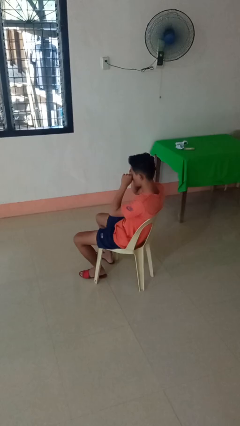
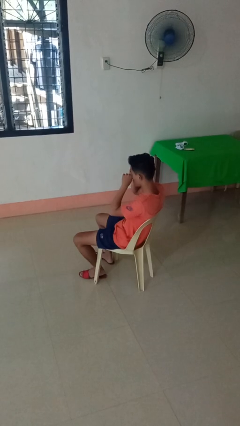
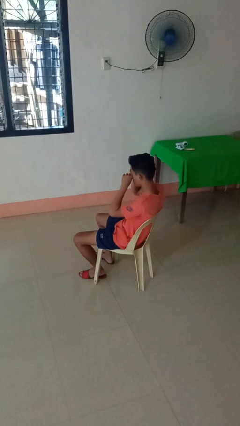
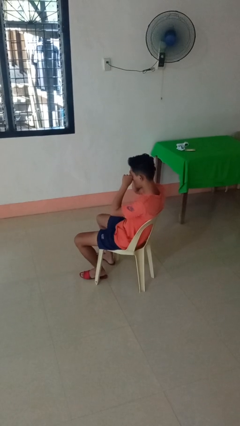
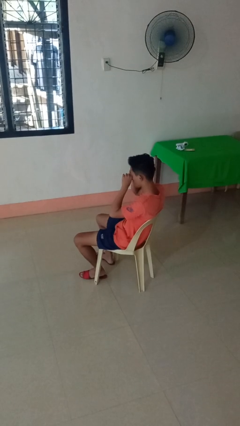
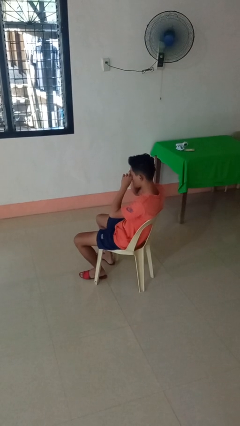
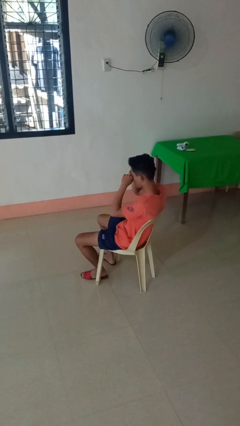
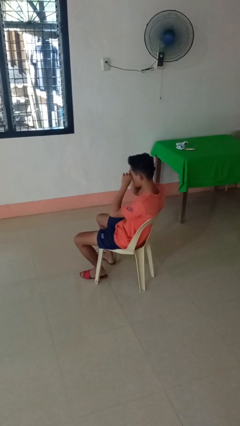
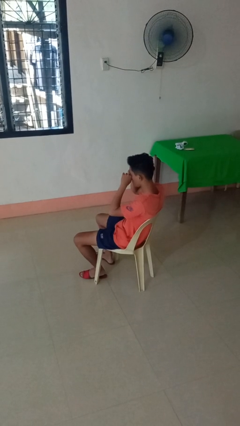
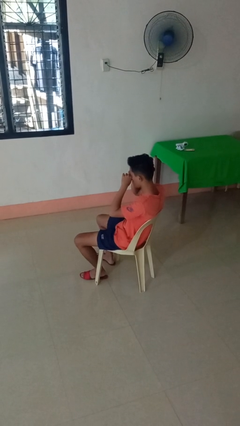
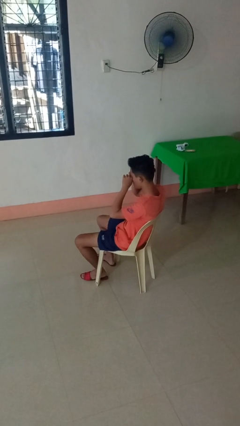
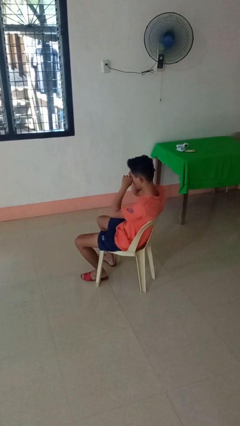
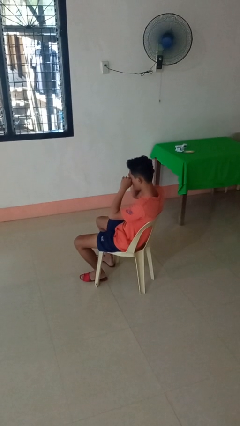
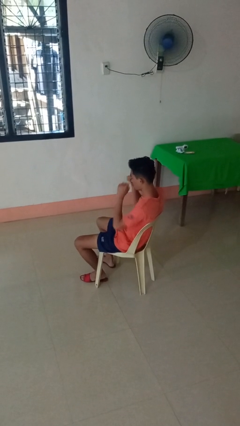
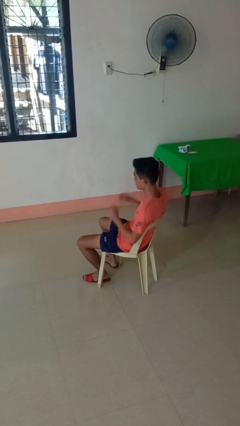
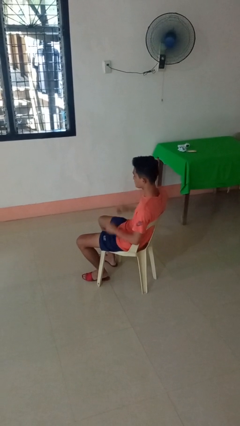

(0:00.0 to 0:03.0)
person rubs eyes

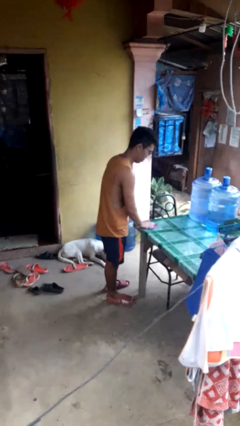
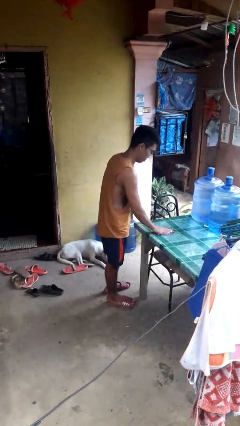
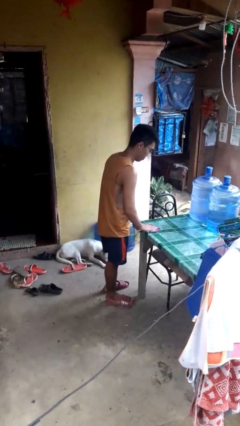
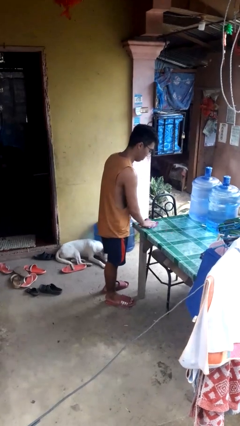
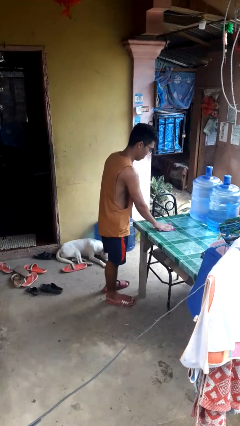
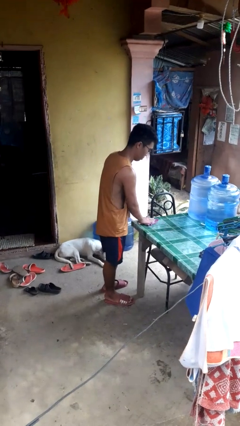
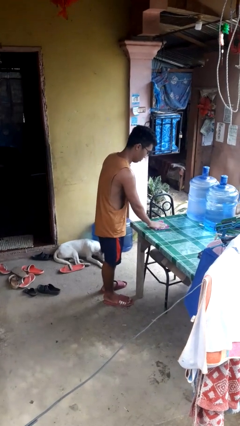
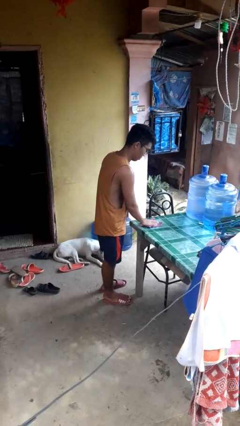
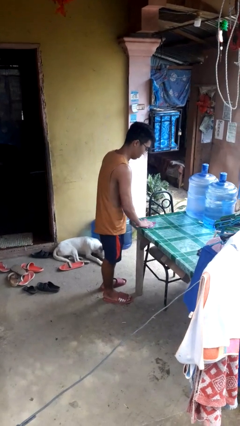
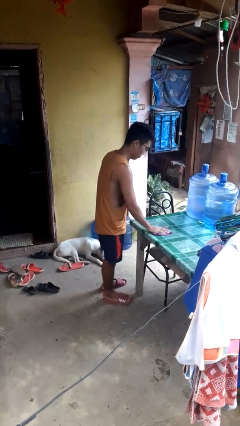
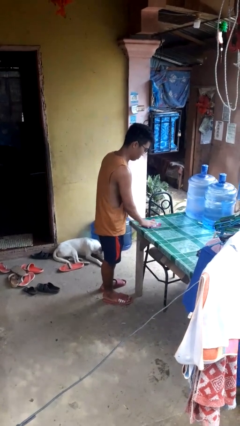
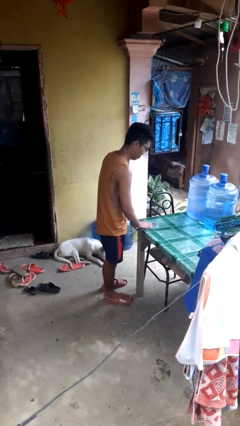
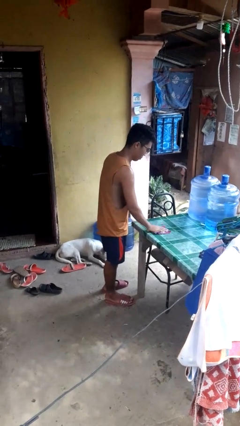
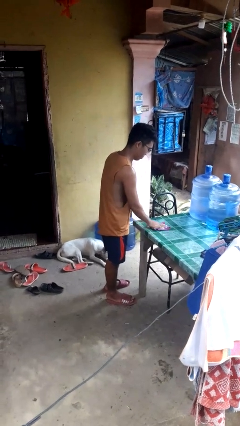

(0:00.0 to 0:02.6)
person cleans table with rag

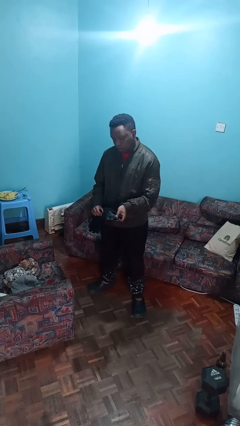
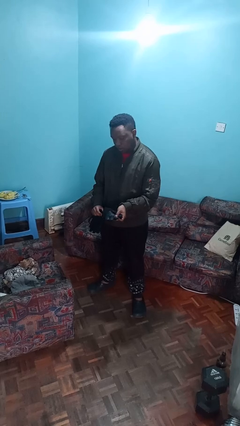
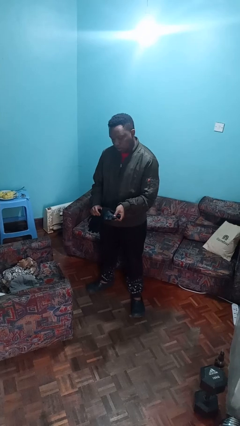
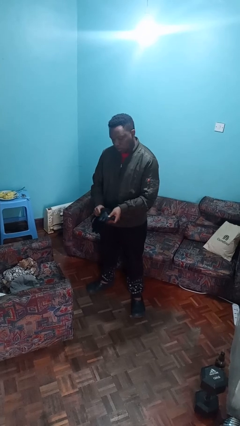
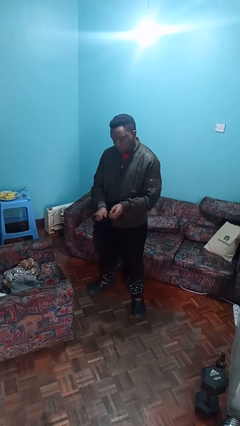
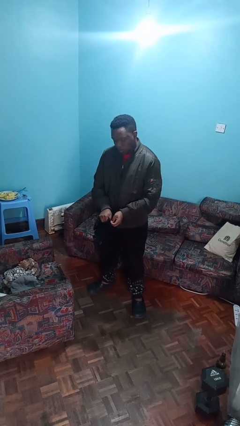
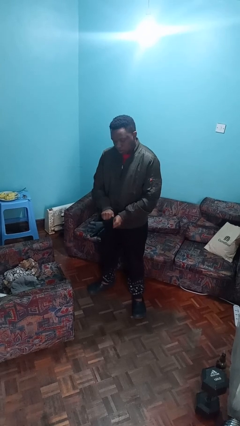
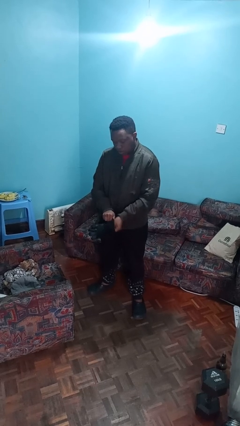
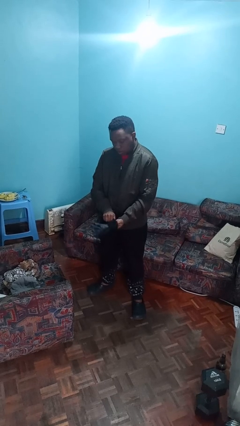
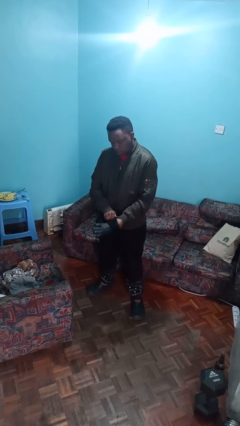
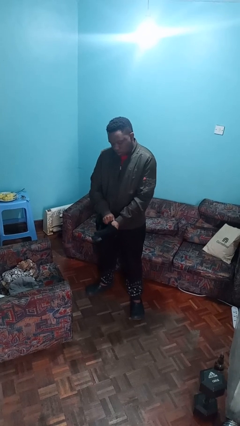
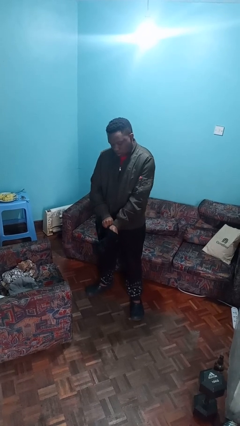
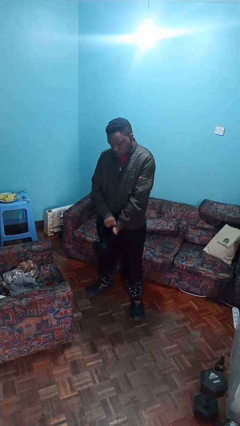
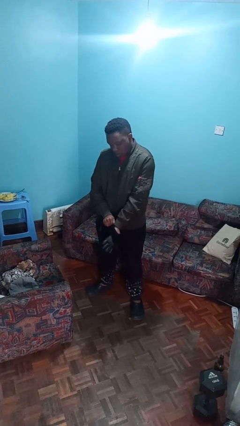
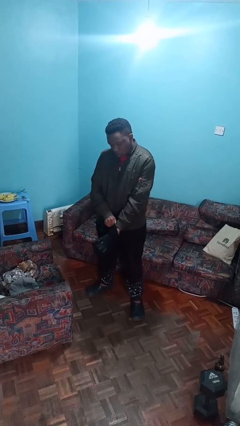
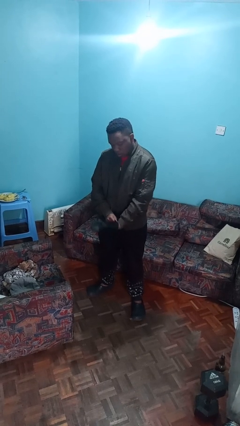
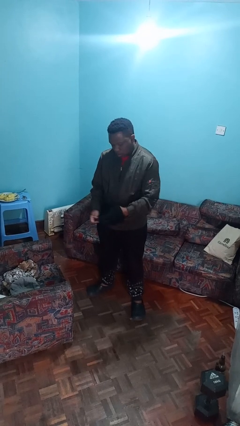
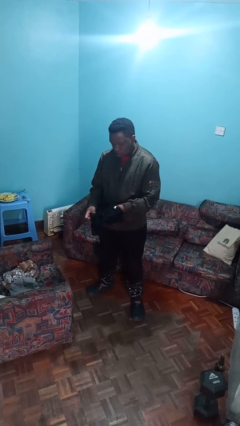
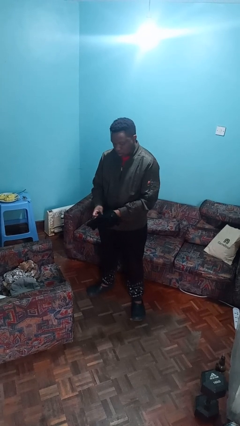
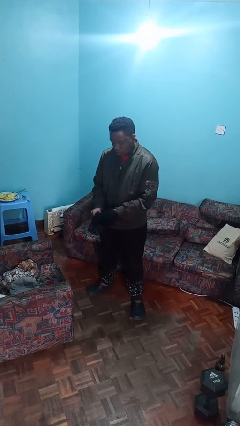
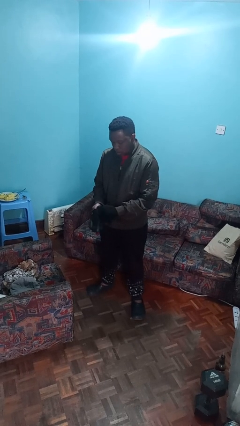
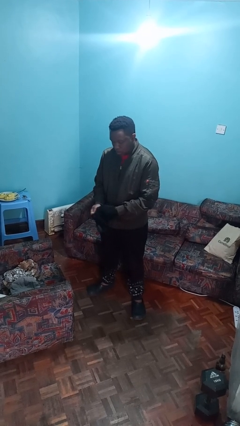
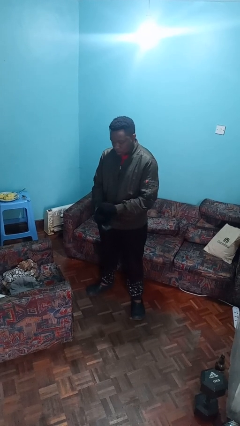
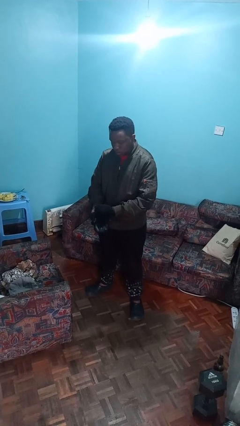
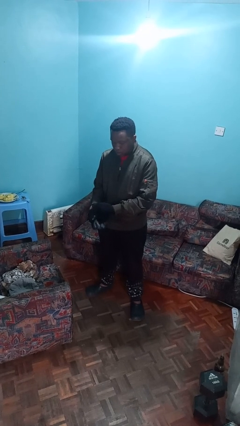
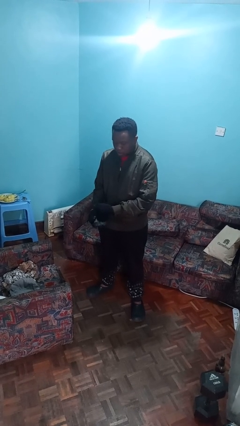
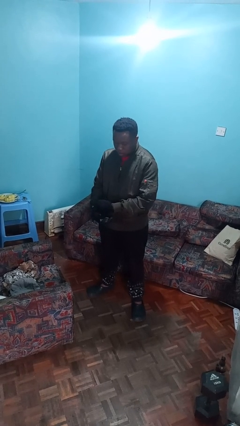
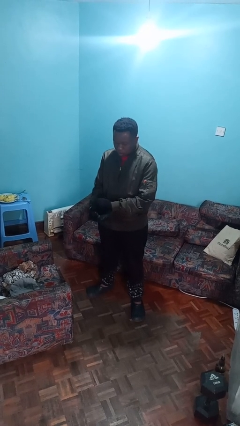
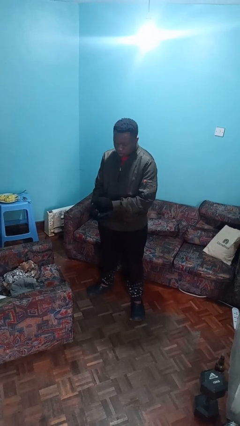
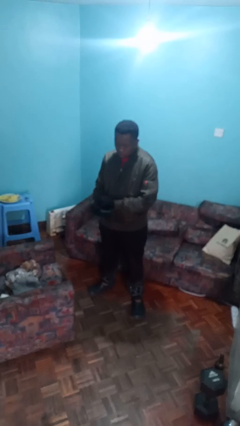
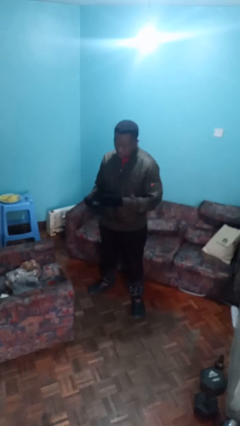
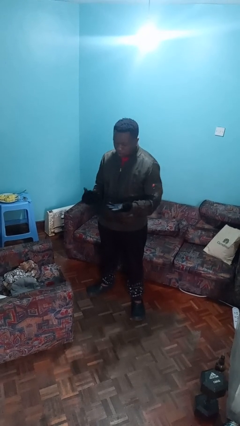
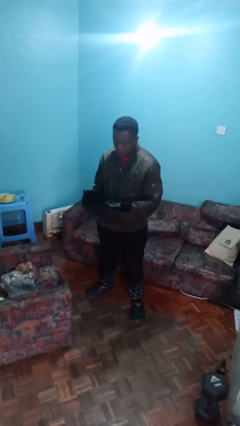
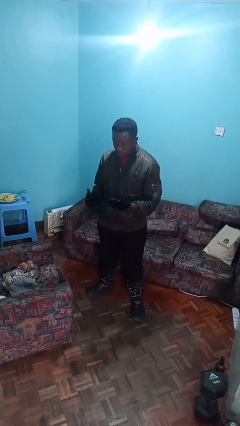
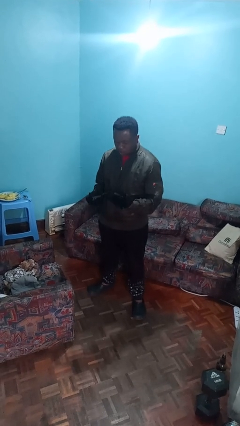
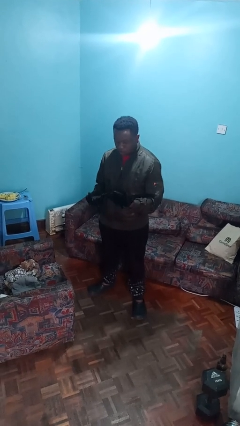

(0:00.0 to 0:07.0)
person puts on gloves

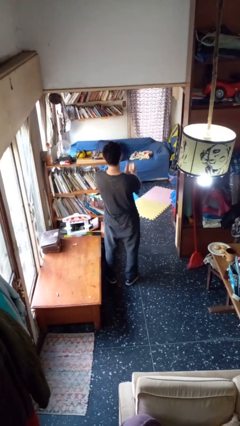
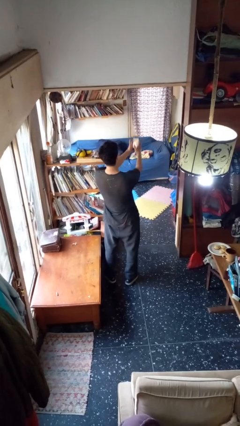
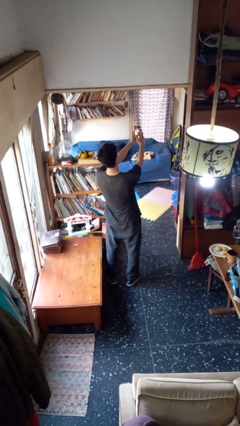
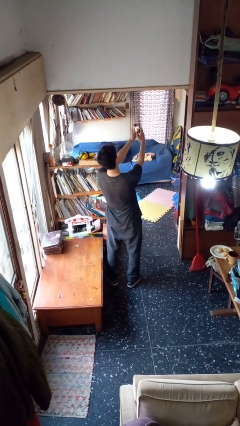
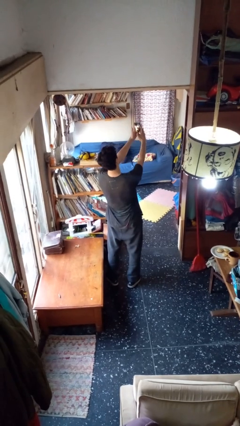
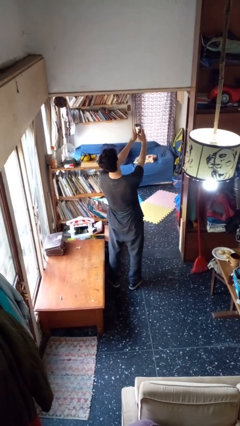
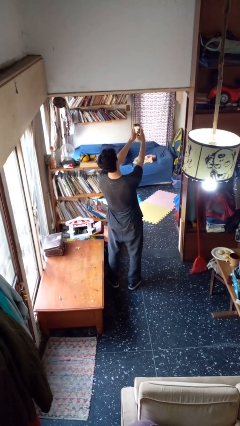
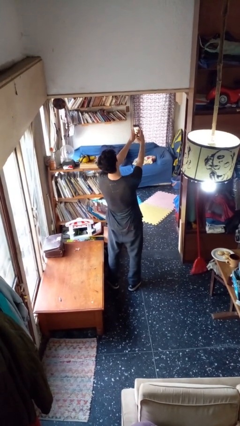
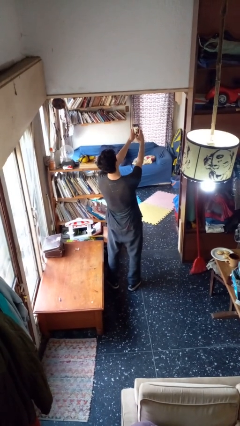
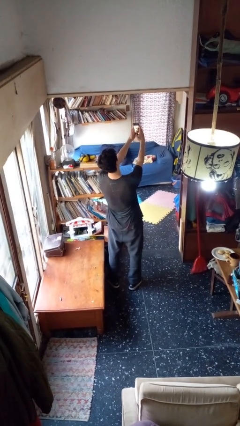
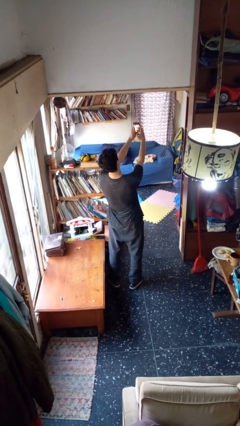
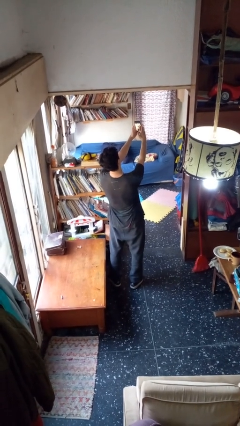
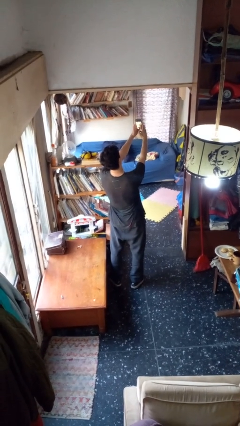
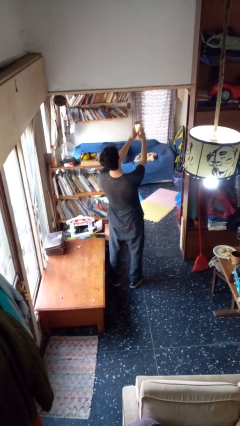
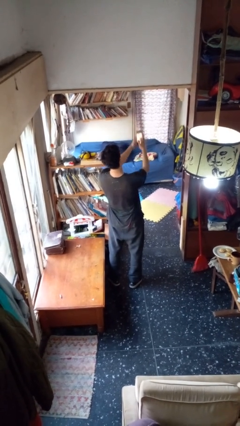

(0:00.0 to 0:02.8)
person takes selfie

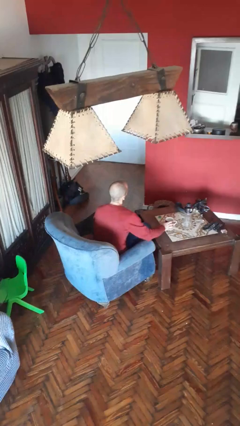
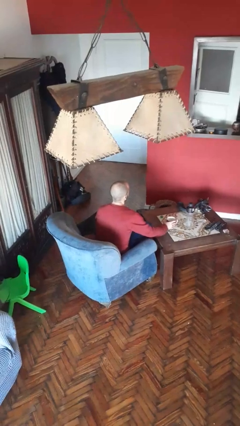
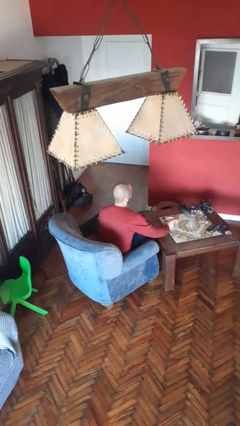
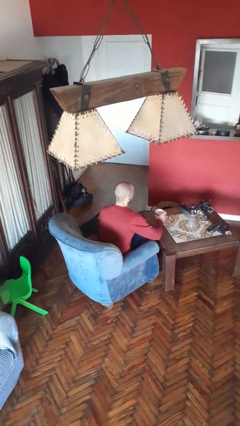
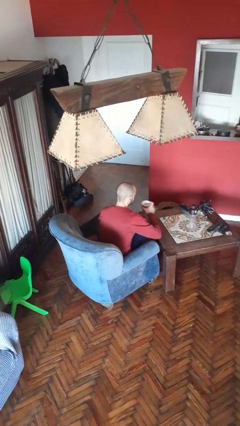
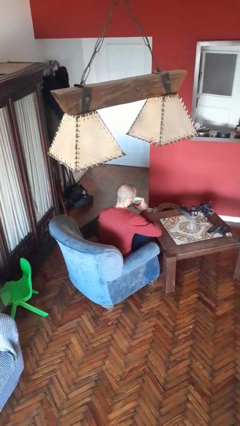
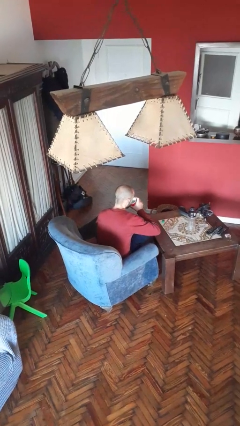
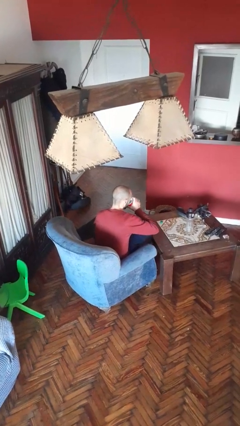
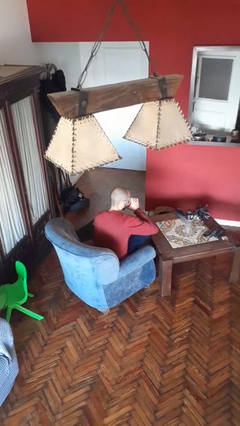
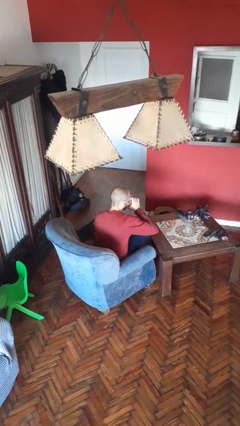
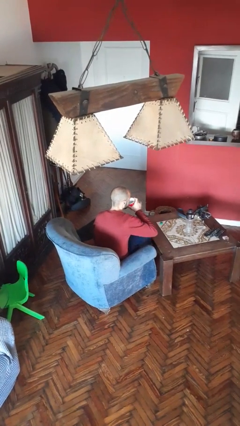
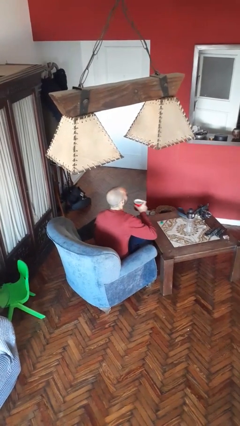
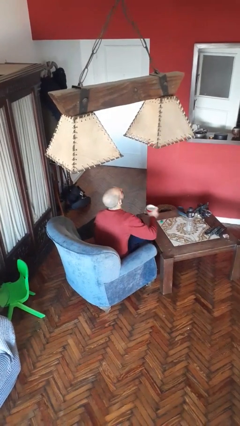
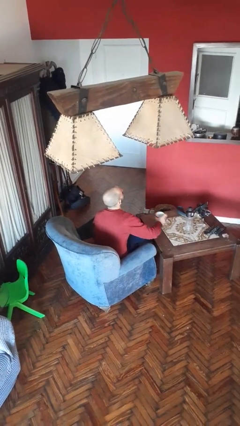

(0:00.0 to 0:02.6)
person drinks from cup
